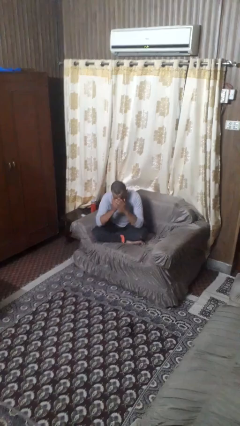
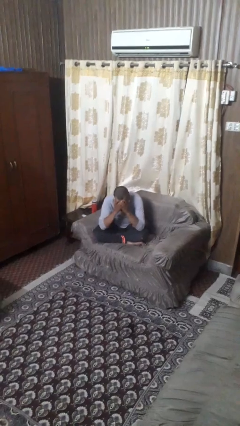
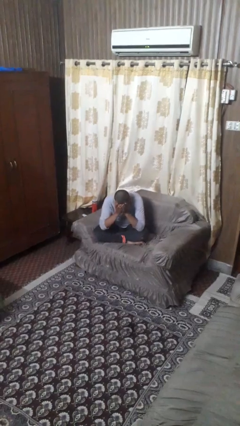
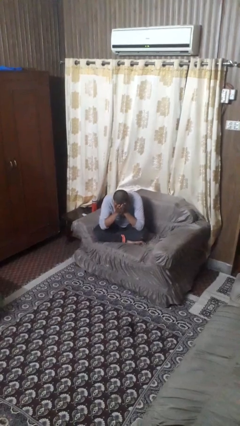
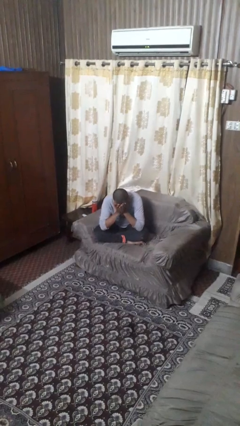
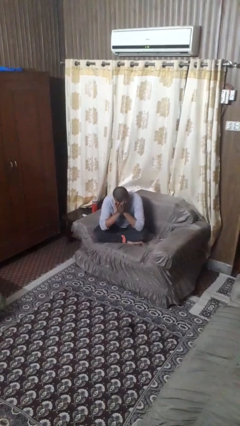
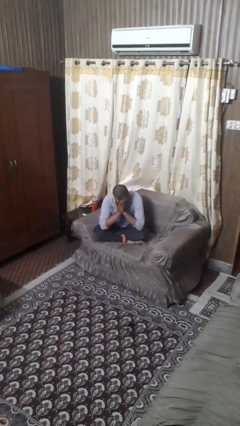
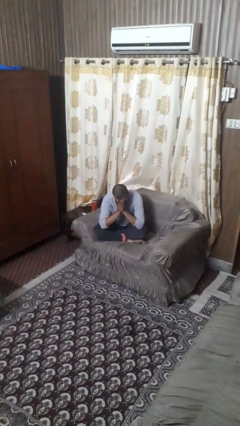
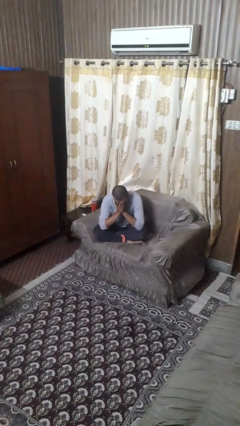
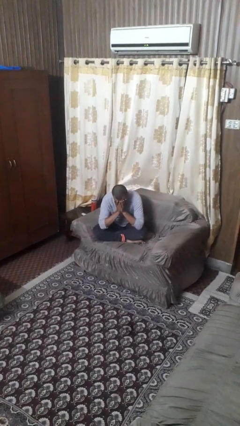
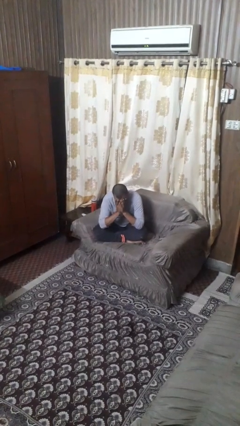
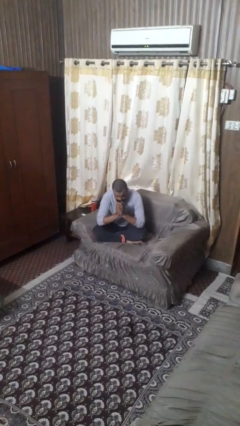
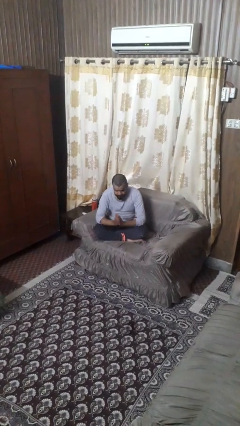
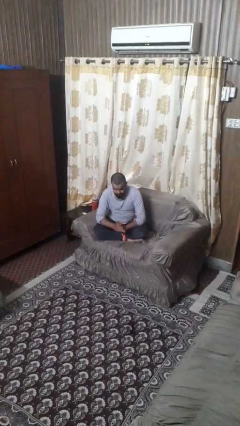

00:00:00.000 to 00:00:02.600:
person covers face with hands

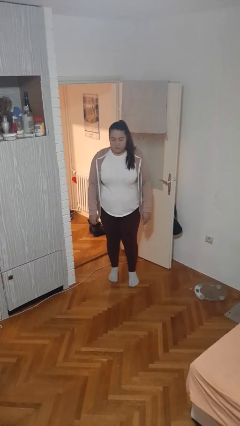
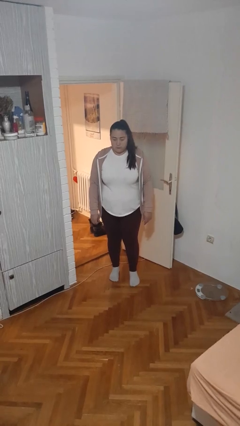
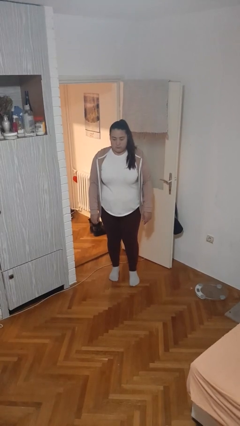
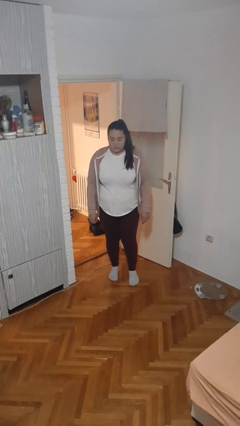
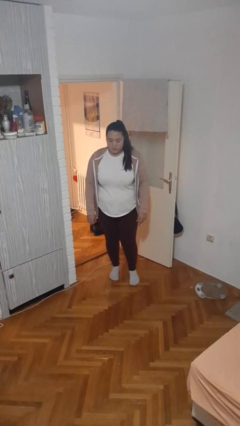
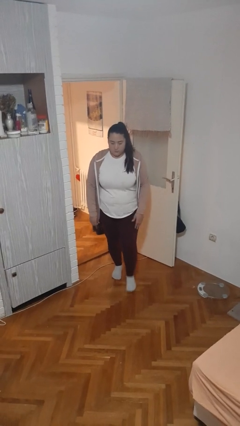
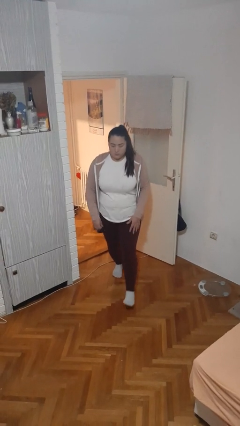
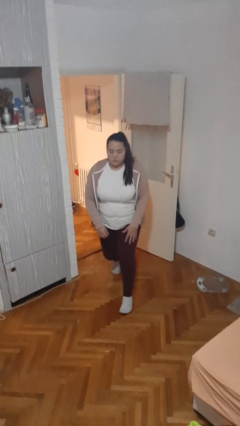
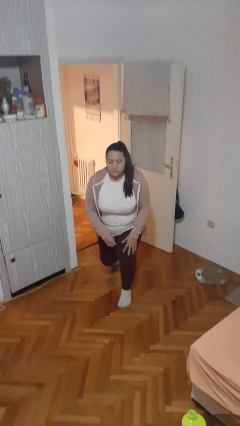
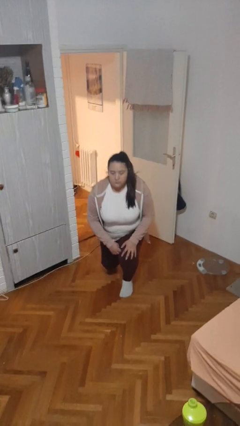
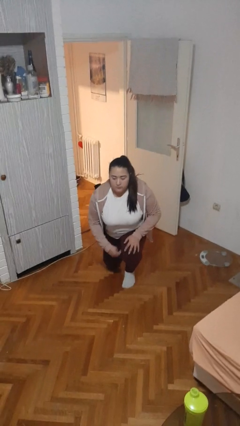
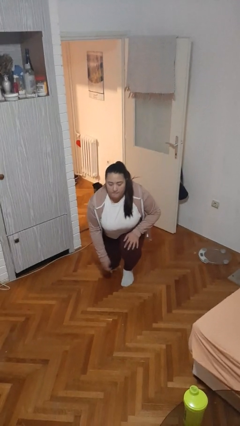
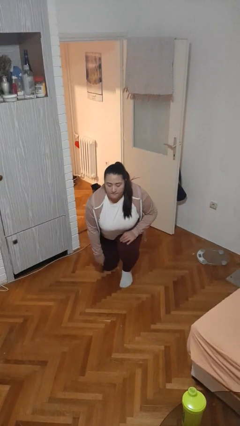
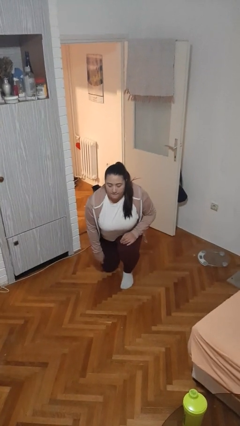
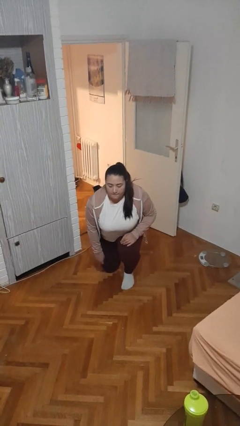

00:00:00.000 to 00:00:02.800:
person kneels

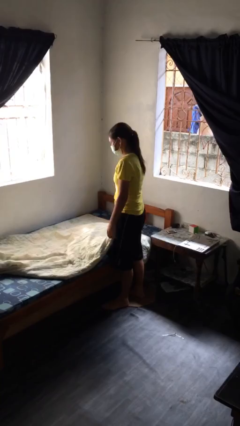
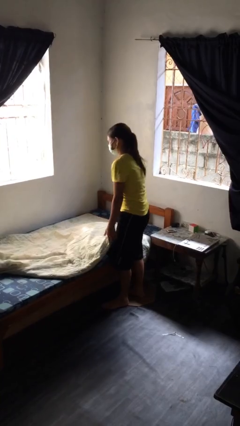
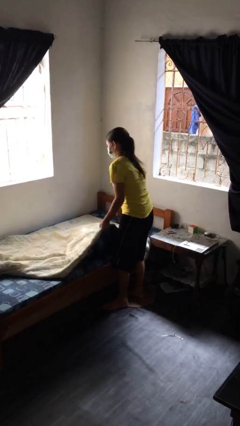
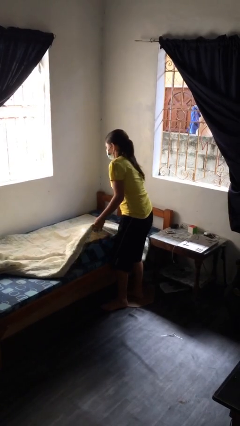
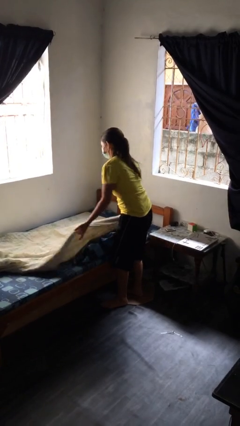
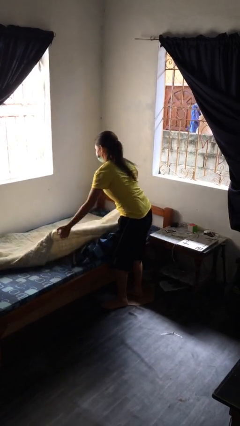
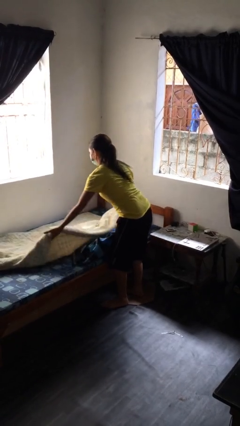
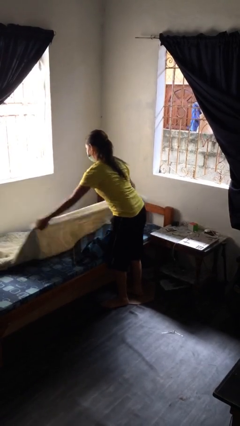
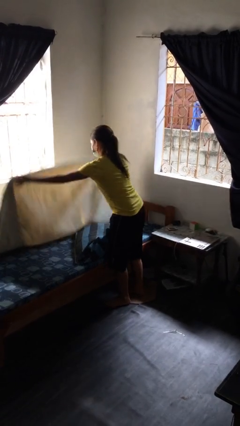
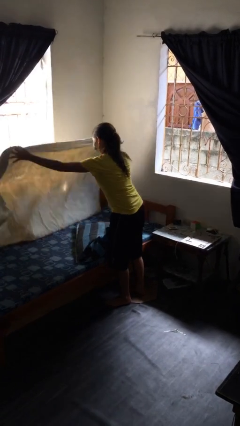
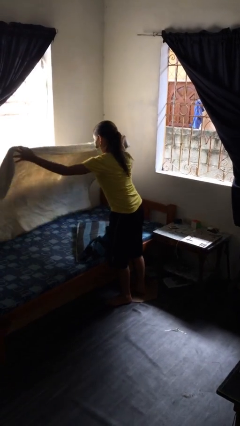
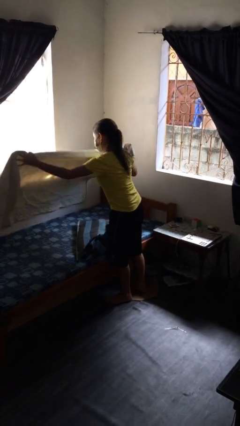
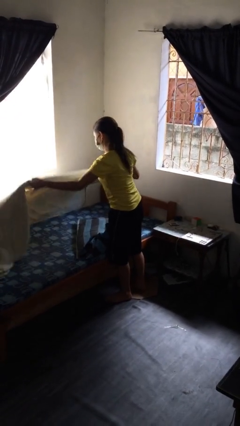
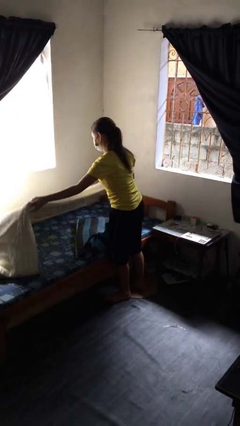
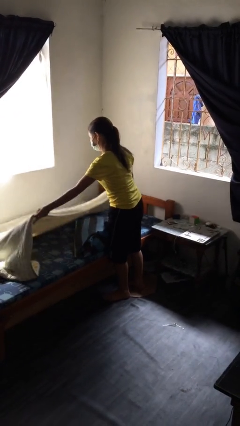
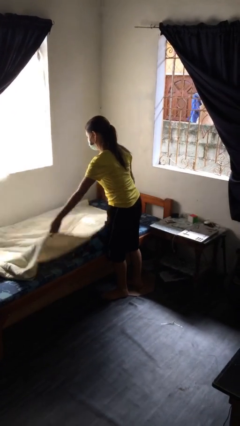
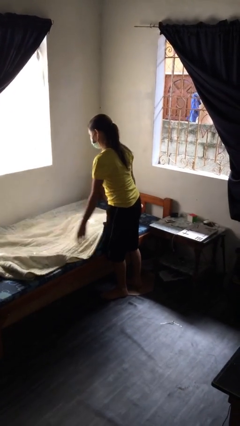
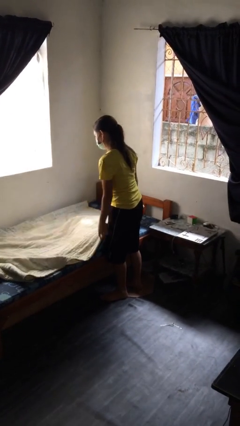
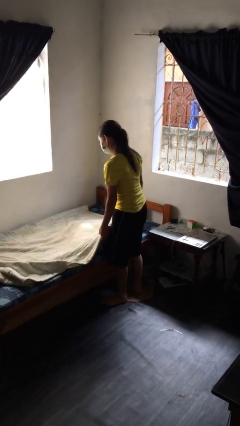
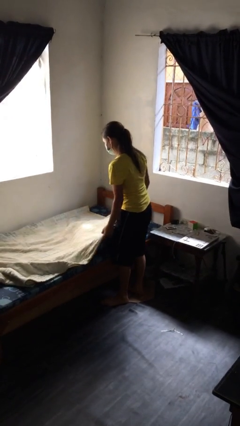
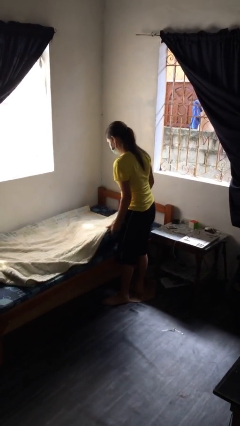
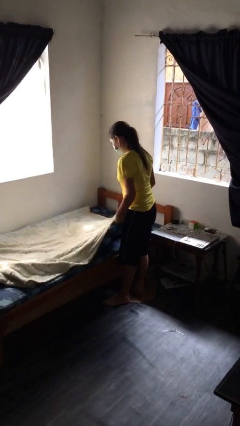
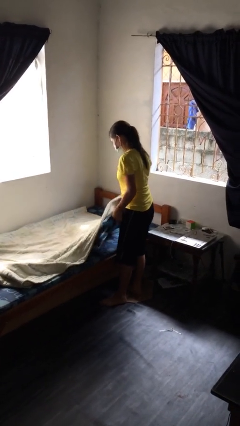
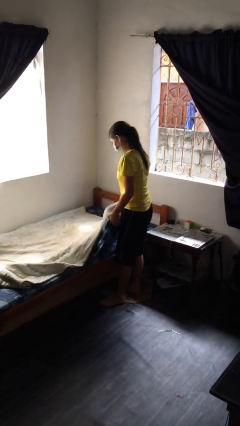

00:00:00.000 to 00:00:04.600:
person makes bed

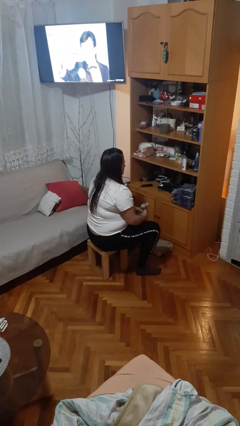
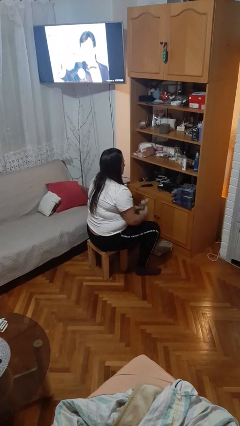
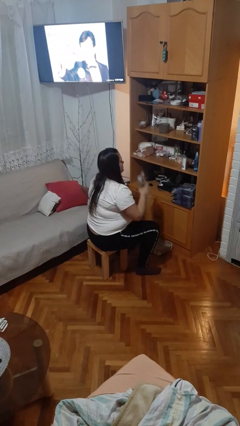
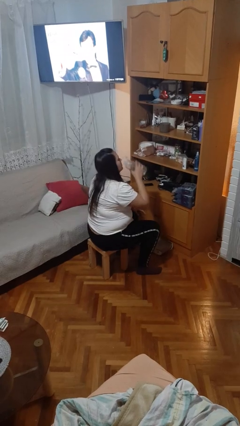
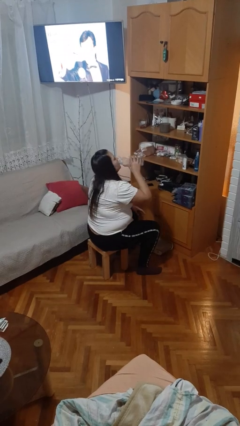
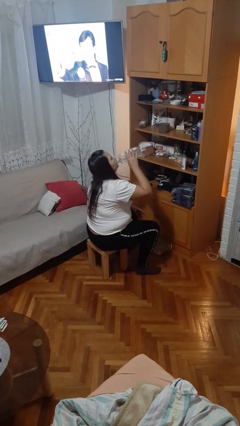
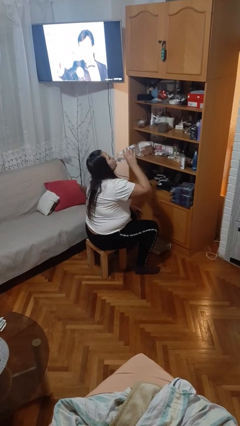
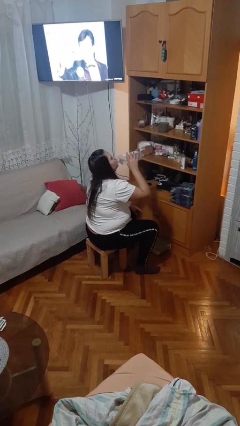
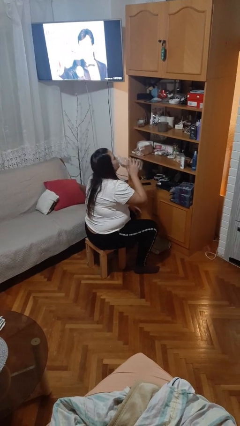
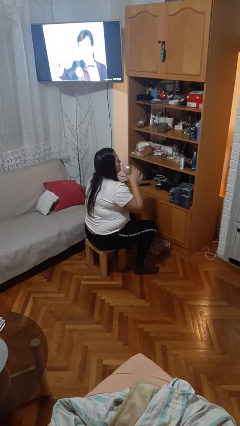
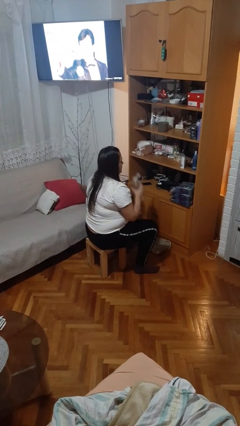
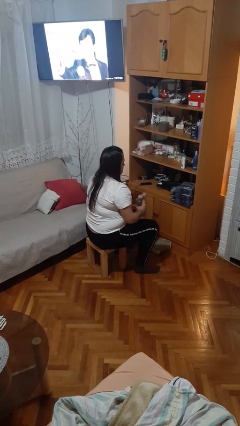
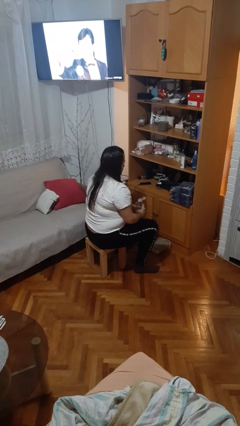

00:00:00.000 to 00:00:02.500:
person drinks from bottle

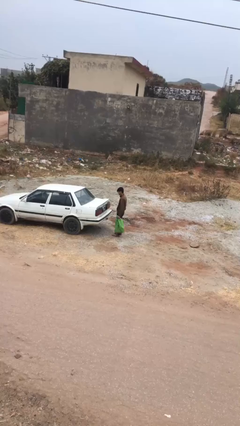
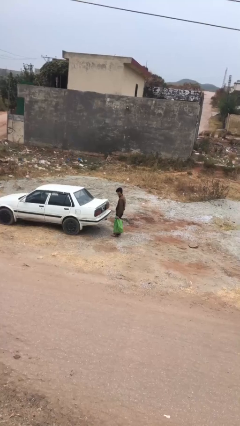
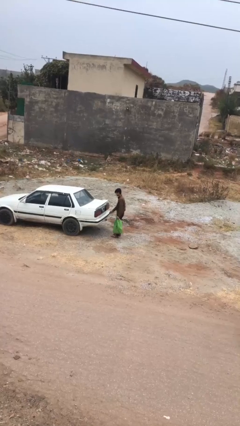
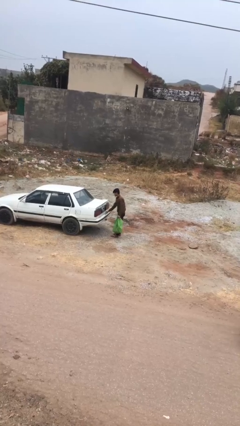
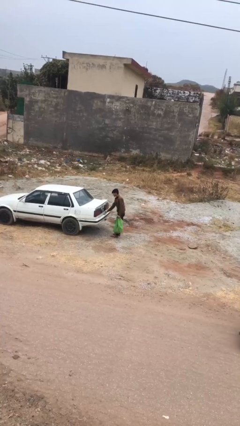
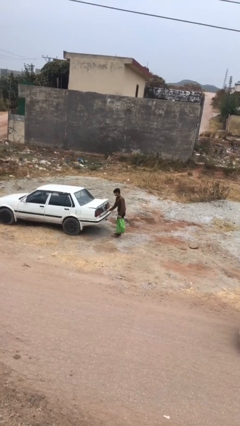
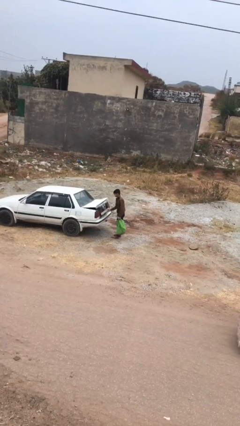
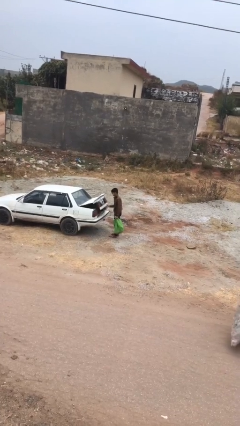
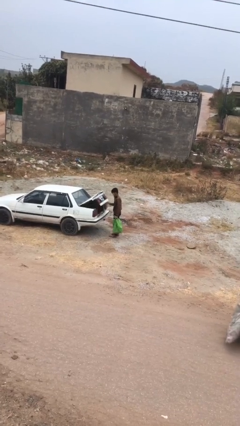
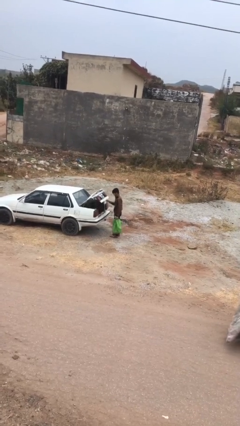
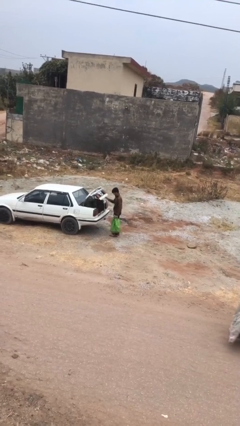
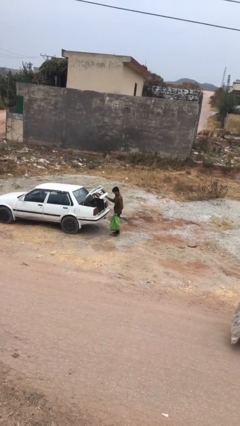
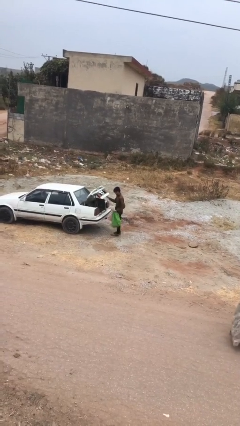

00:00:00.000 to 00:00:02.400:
person opens car trunk

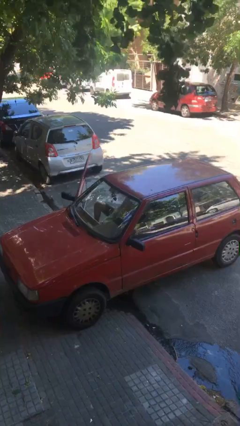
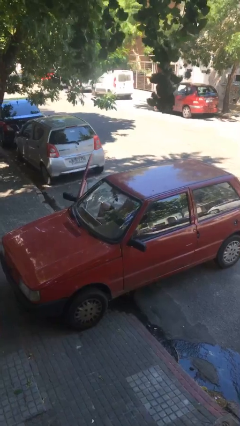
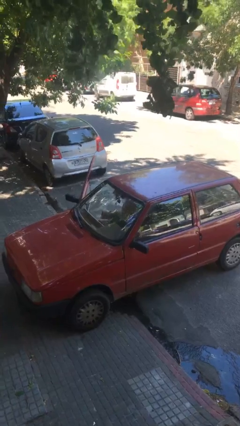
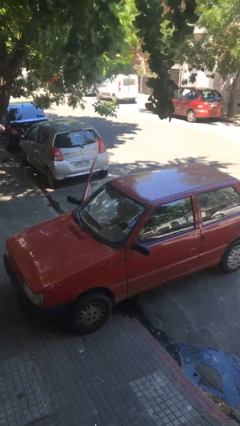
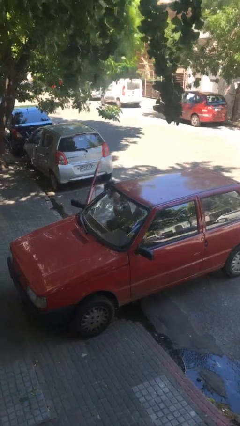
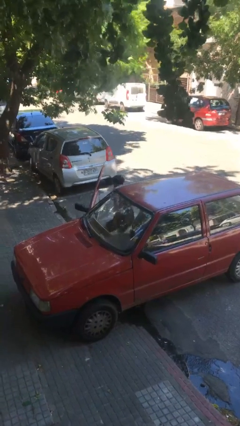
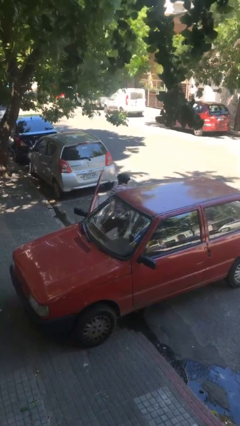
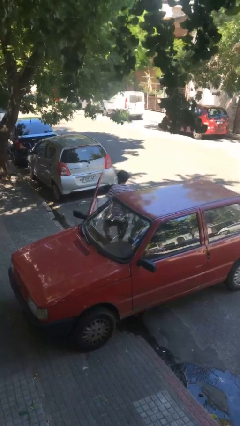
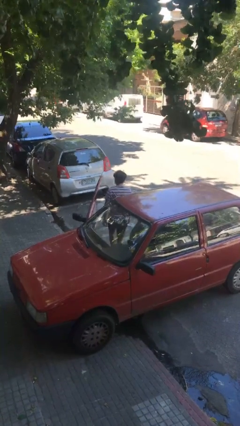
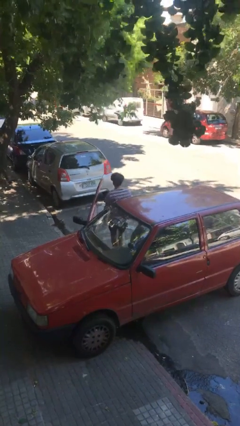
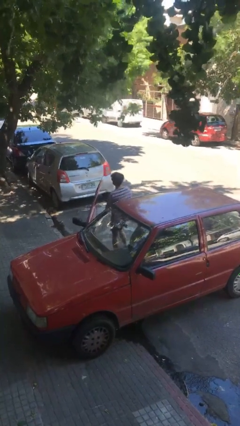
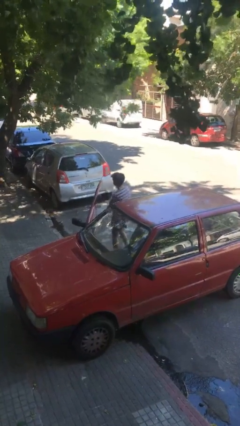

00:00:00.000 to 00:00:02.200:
person exits car
